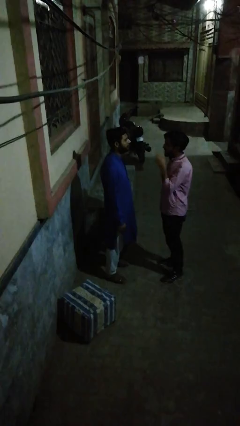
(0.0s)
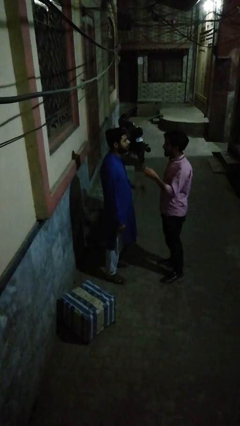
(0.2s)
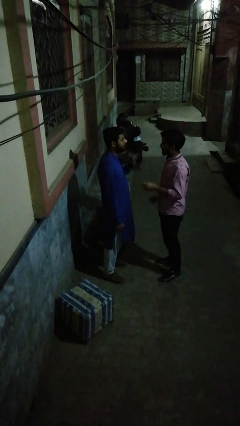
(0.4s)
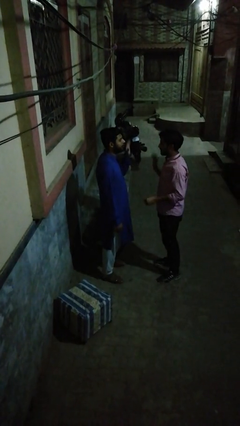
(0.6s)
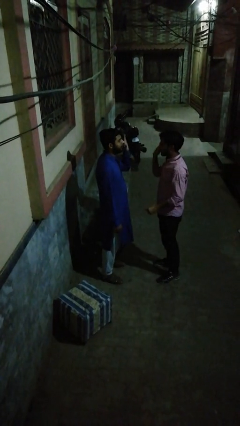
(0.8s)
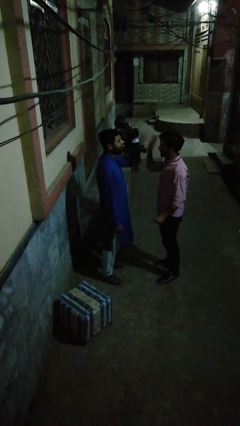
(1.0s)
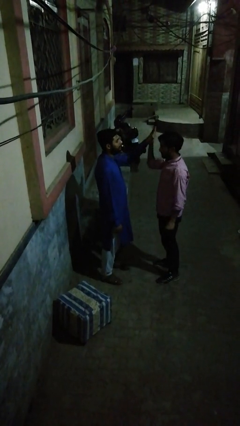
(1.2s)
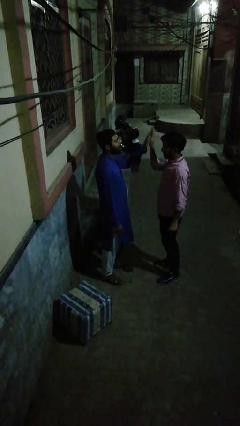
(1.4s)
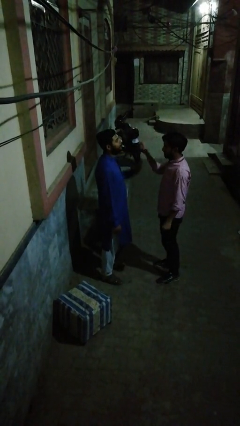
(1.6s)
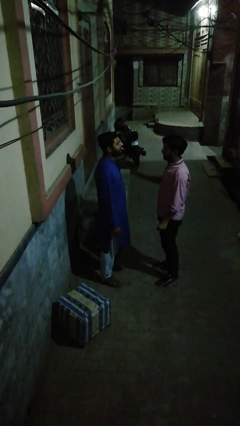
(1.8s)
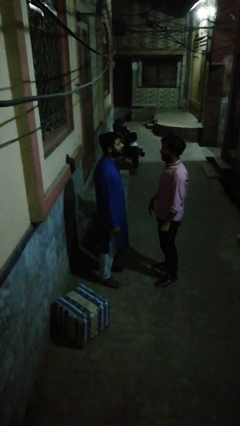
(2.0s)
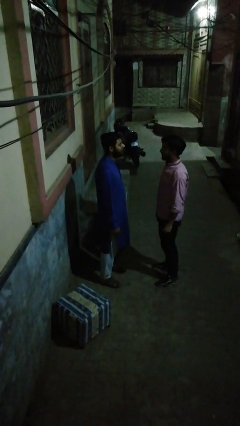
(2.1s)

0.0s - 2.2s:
person highfives hand

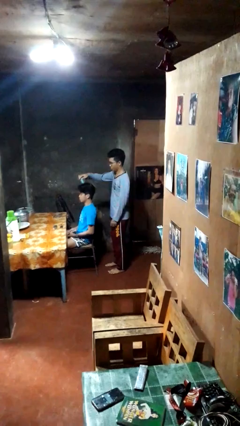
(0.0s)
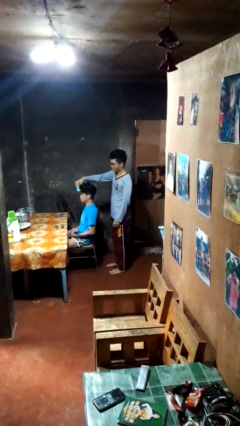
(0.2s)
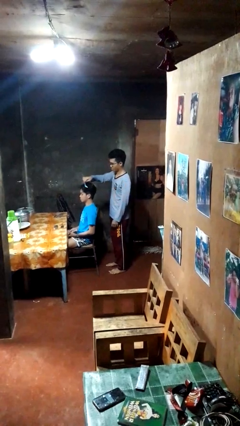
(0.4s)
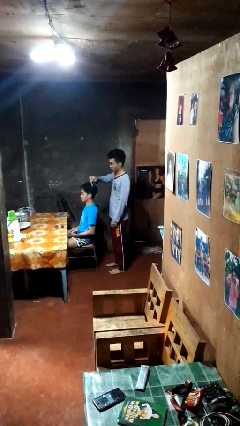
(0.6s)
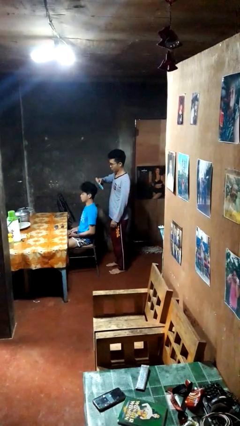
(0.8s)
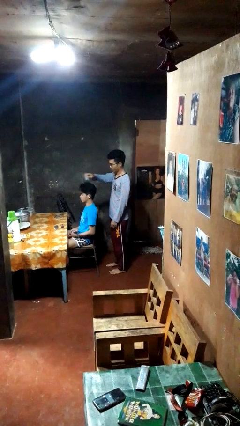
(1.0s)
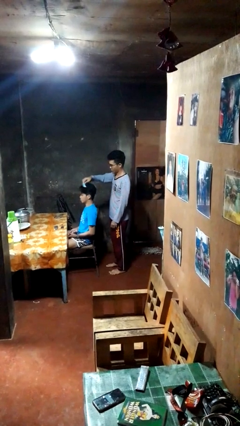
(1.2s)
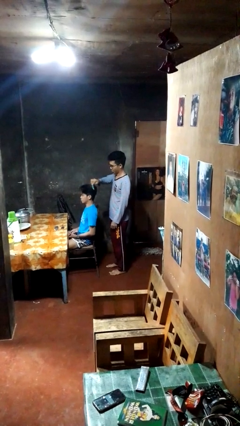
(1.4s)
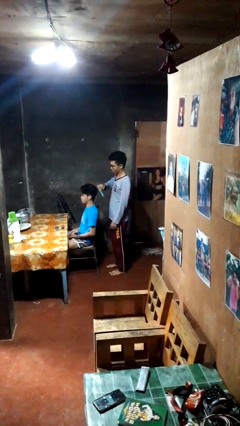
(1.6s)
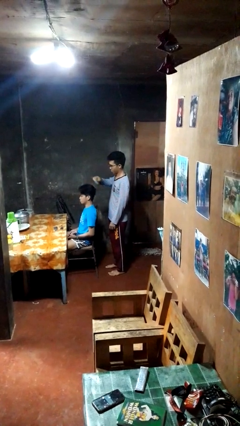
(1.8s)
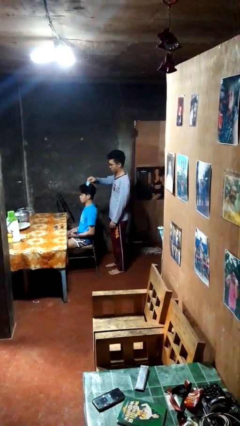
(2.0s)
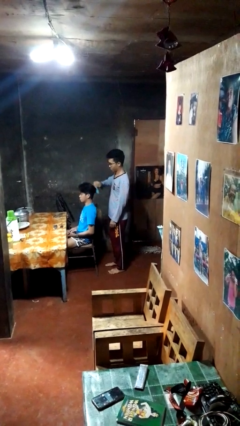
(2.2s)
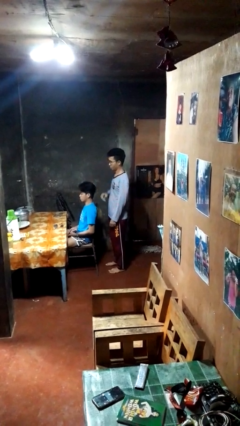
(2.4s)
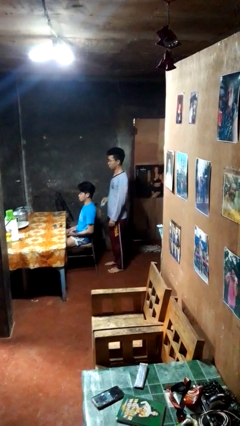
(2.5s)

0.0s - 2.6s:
person brushes hair of person

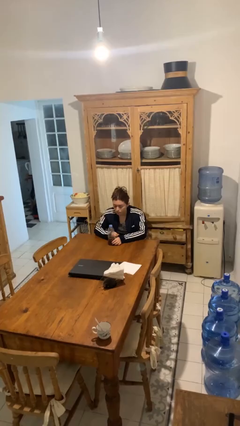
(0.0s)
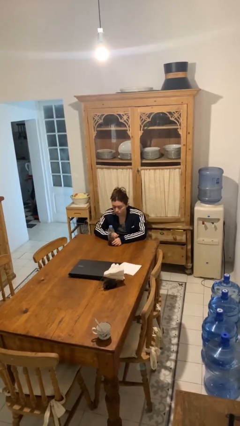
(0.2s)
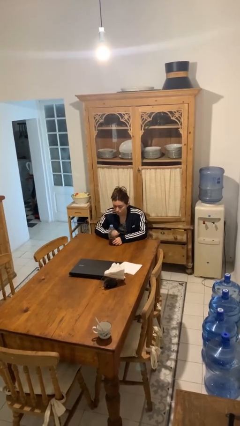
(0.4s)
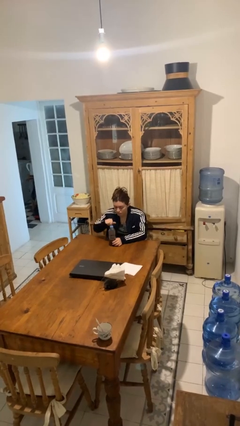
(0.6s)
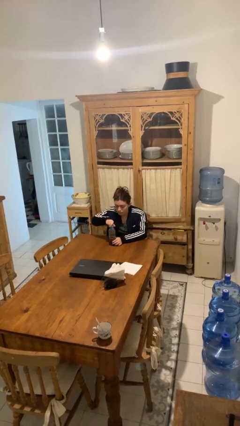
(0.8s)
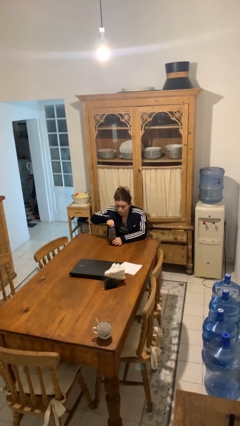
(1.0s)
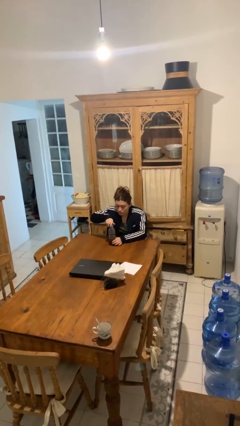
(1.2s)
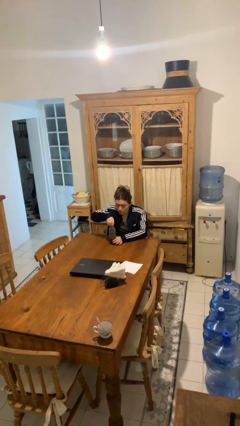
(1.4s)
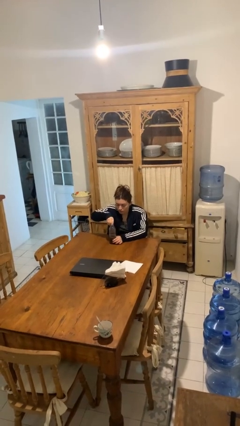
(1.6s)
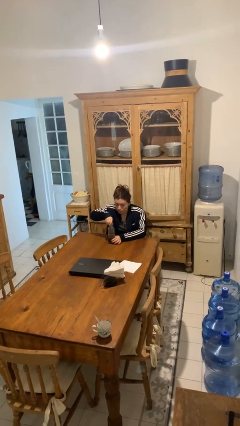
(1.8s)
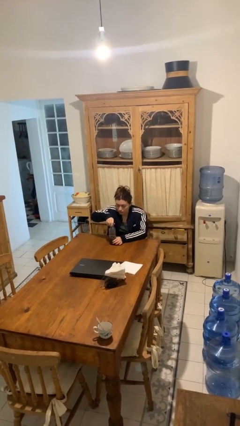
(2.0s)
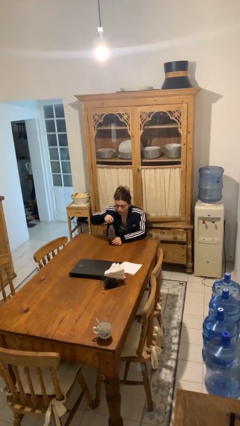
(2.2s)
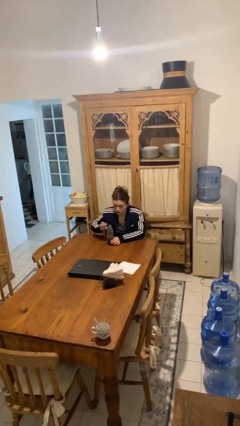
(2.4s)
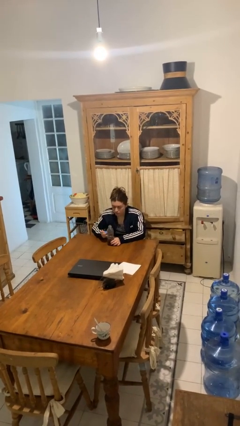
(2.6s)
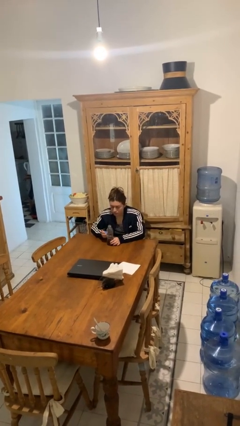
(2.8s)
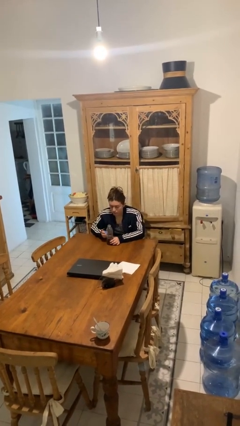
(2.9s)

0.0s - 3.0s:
person unscrews lid from bottle

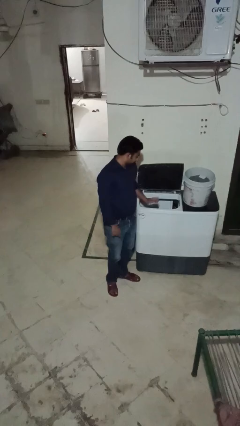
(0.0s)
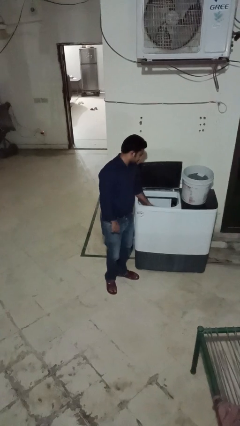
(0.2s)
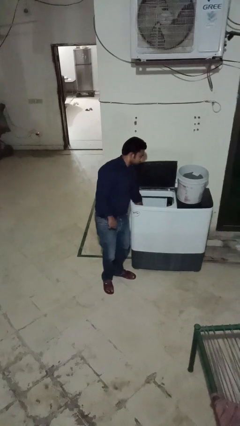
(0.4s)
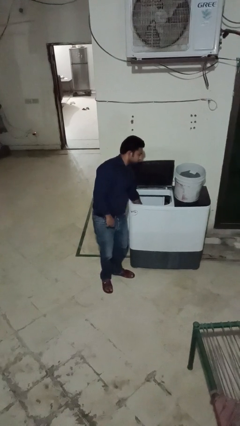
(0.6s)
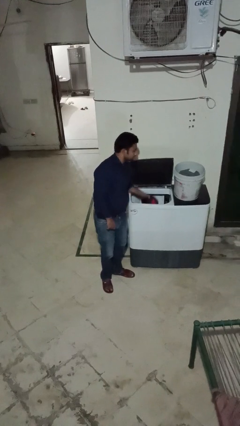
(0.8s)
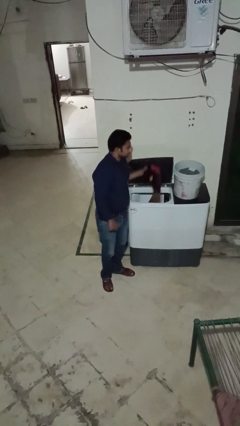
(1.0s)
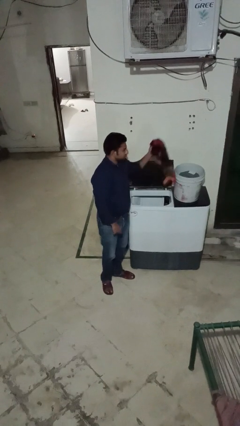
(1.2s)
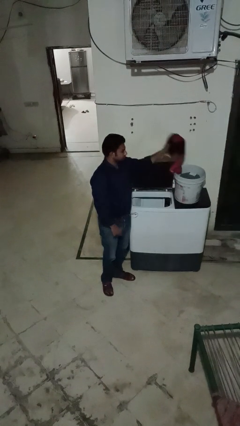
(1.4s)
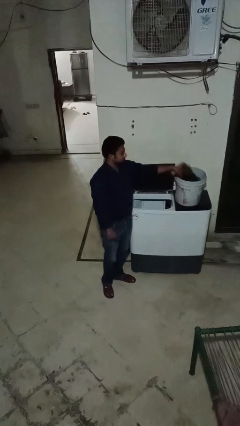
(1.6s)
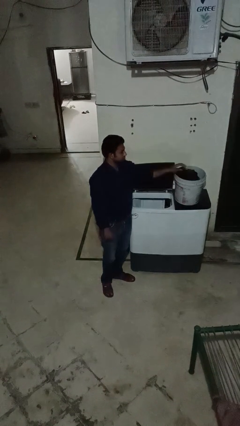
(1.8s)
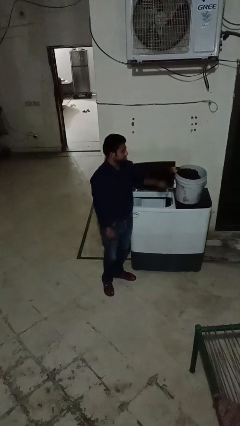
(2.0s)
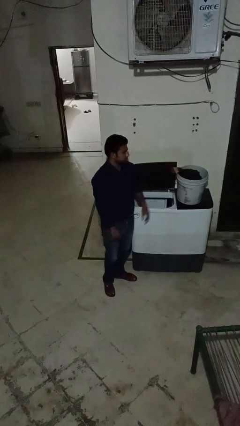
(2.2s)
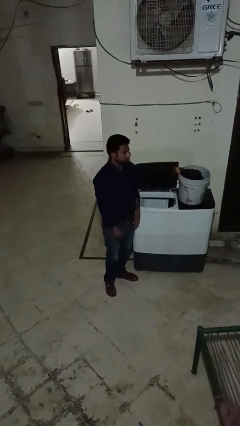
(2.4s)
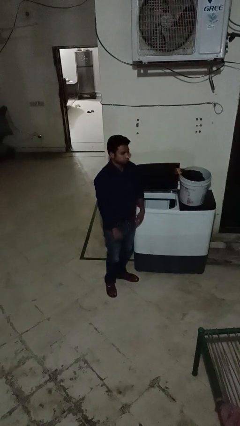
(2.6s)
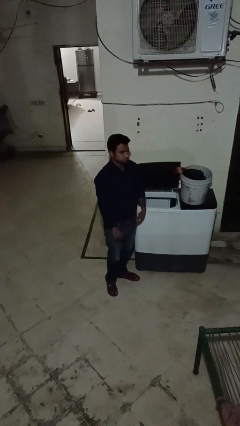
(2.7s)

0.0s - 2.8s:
person unloads clotheswasher

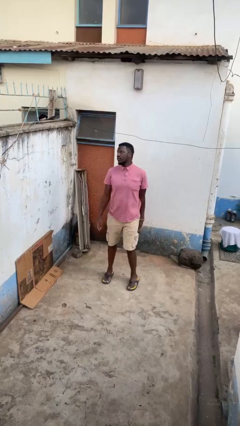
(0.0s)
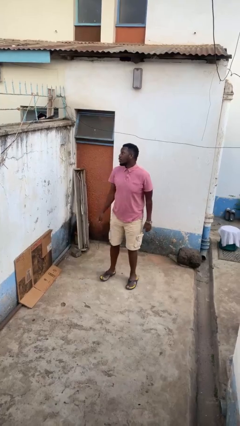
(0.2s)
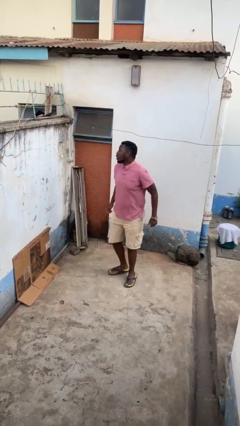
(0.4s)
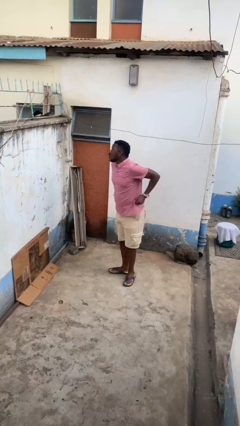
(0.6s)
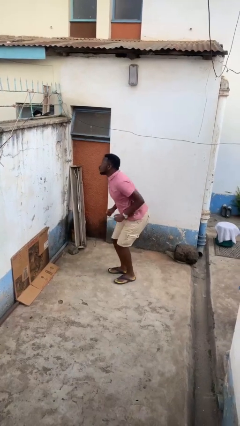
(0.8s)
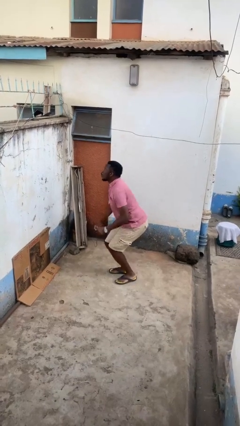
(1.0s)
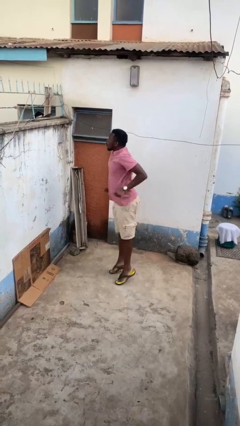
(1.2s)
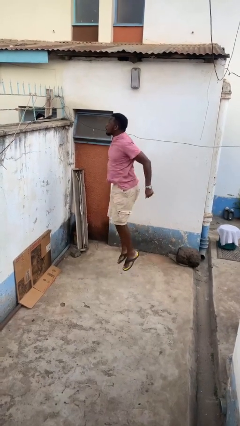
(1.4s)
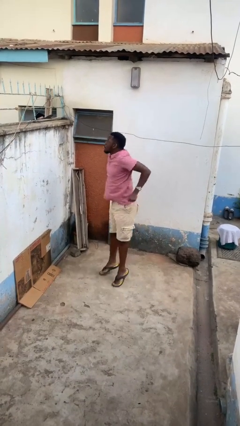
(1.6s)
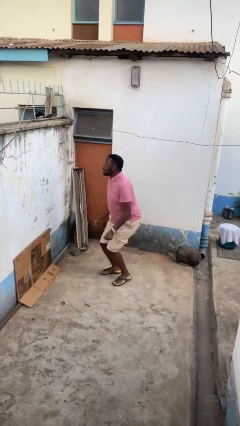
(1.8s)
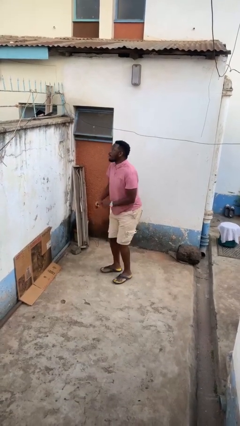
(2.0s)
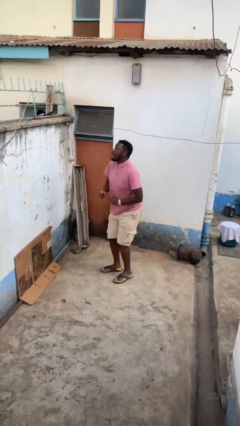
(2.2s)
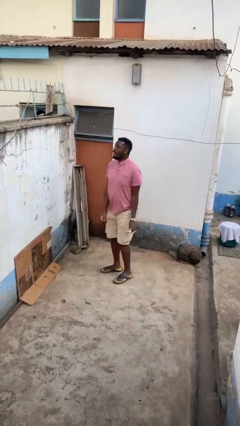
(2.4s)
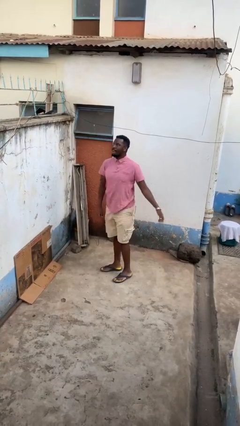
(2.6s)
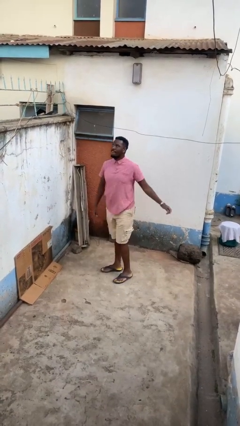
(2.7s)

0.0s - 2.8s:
person jumps

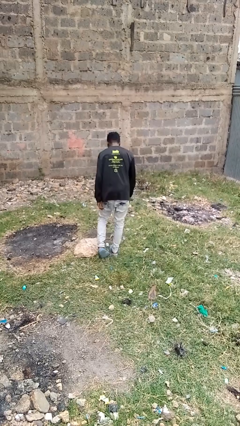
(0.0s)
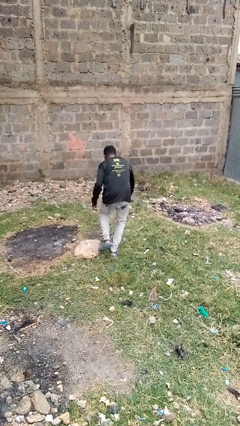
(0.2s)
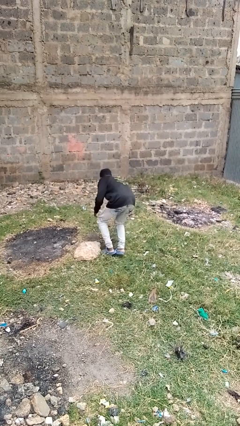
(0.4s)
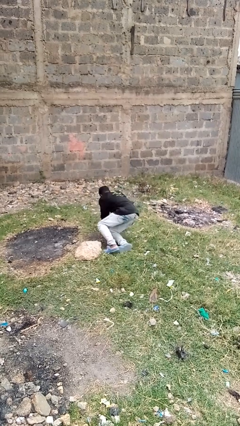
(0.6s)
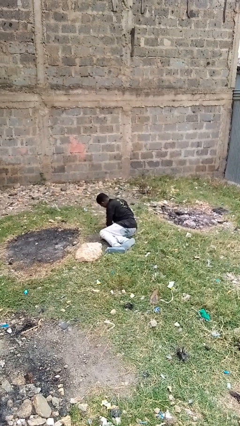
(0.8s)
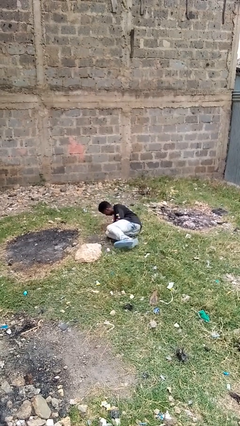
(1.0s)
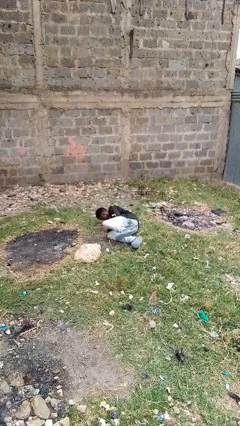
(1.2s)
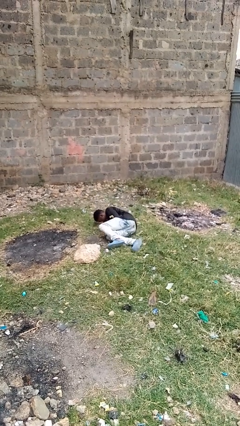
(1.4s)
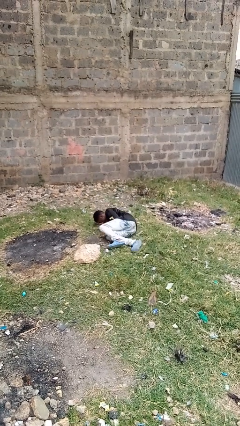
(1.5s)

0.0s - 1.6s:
person trips on object on floor

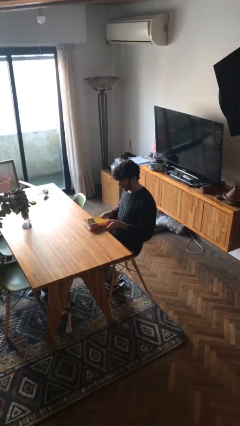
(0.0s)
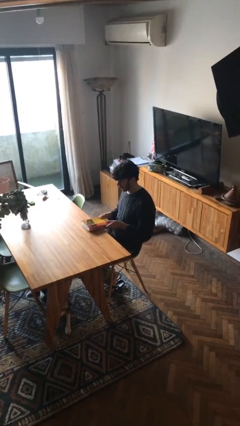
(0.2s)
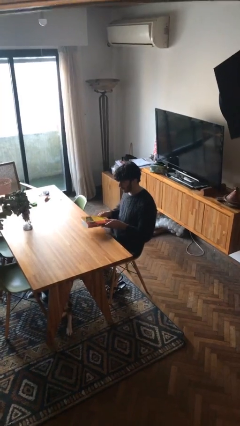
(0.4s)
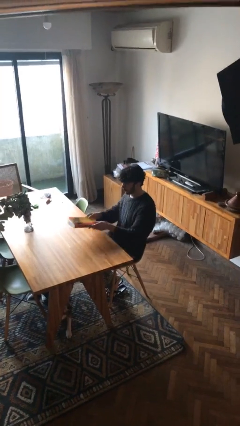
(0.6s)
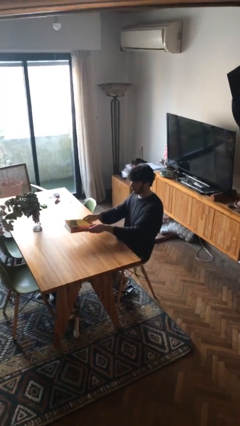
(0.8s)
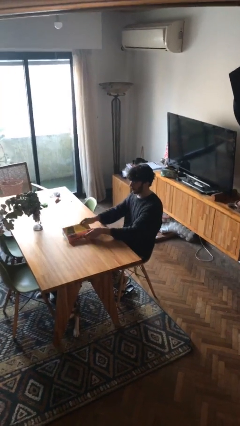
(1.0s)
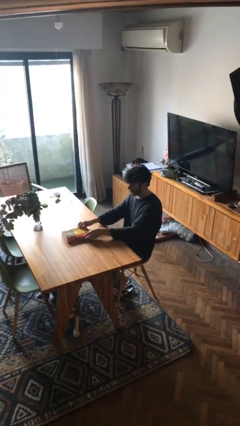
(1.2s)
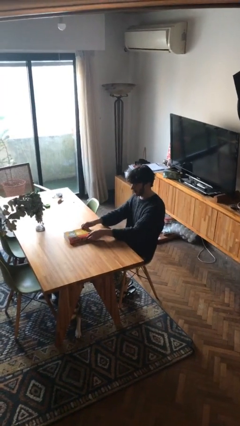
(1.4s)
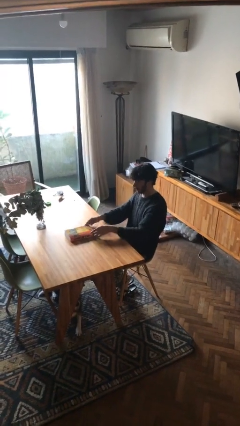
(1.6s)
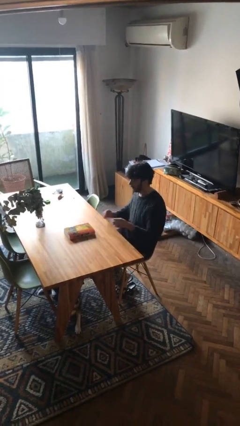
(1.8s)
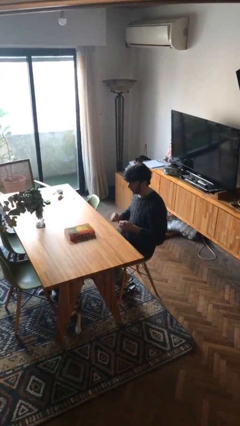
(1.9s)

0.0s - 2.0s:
person puts down object on table
